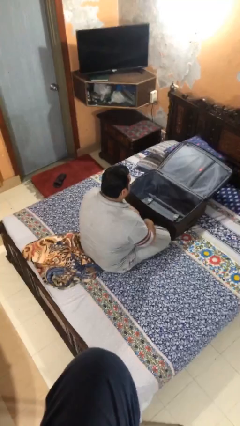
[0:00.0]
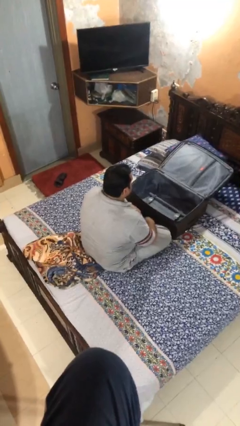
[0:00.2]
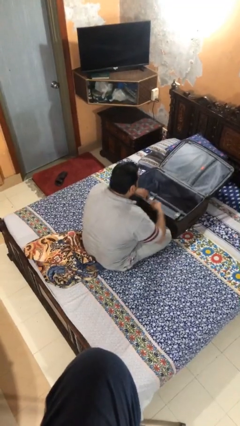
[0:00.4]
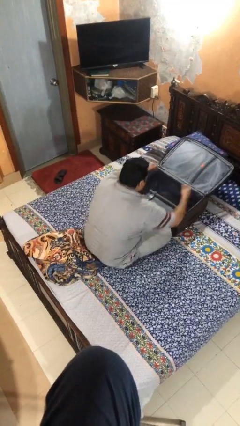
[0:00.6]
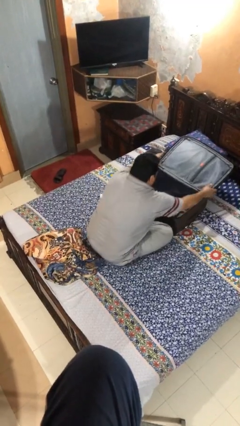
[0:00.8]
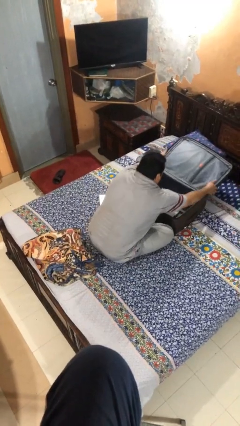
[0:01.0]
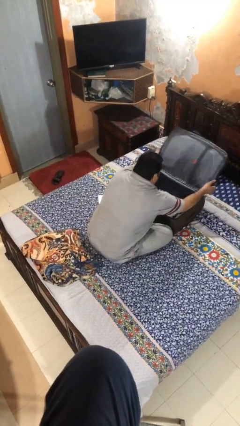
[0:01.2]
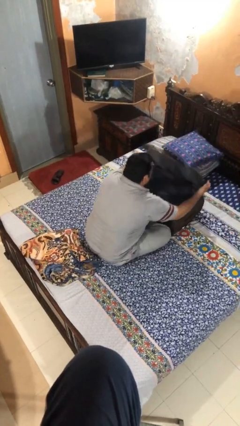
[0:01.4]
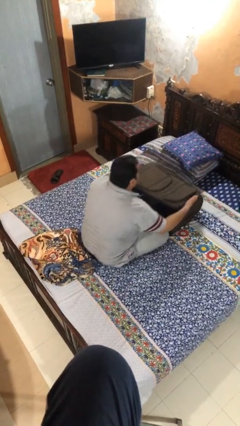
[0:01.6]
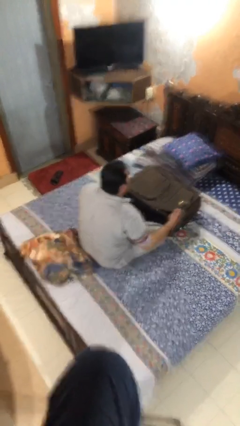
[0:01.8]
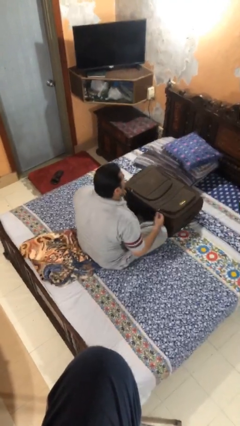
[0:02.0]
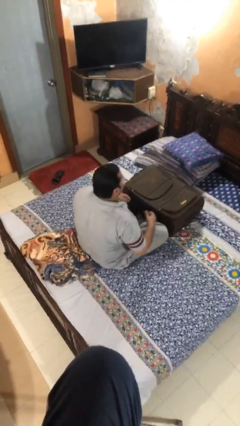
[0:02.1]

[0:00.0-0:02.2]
person closes suitcase

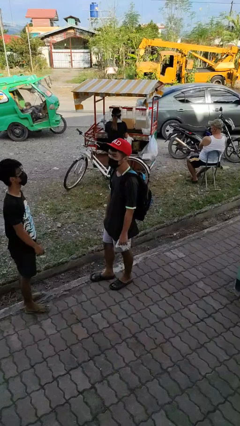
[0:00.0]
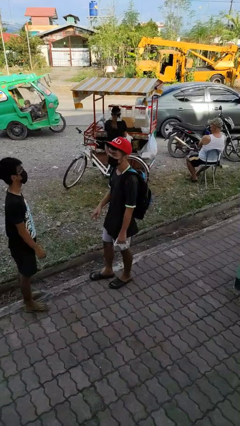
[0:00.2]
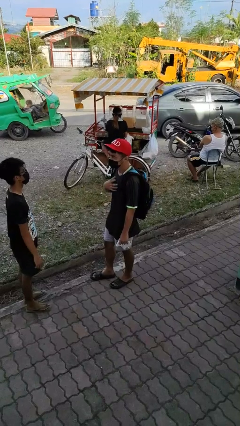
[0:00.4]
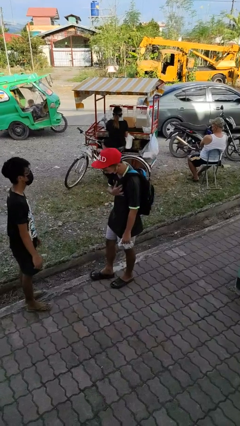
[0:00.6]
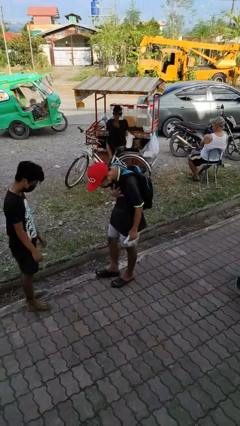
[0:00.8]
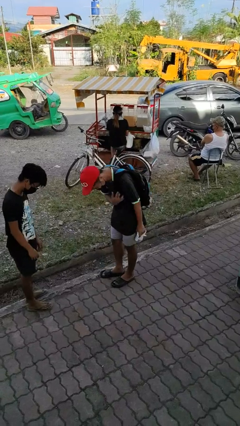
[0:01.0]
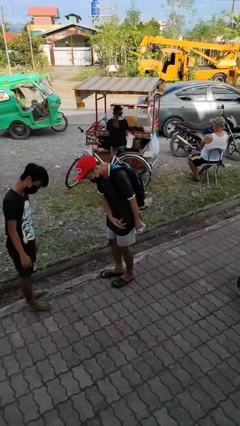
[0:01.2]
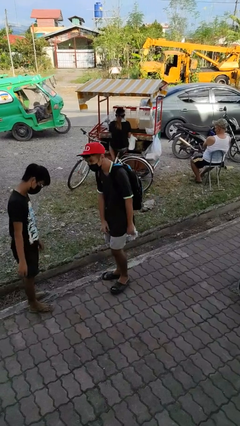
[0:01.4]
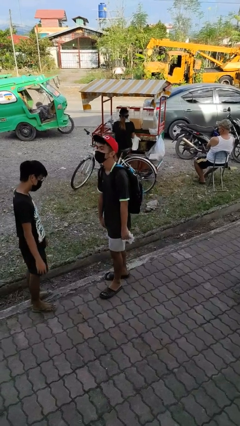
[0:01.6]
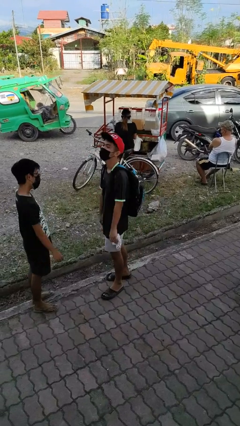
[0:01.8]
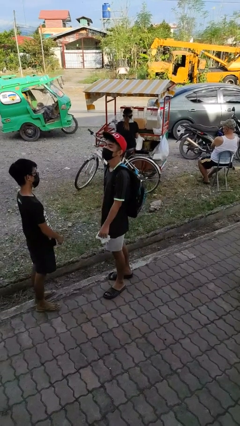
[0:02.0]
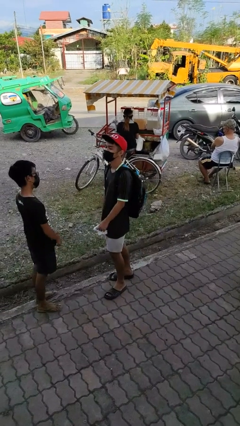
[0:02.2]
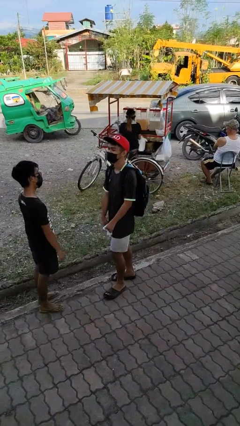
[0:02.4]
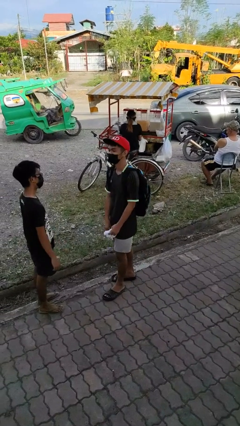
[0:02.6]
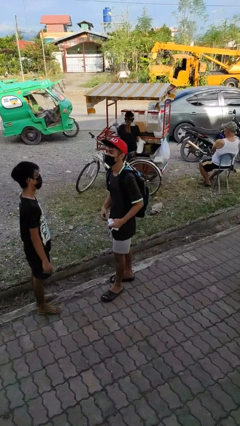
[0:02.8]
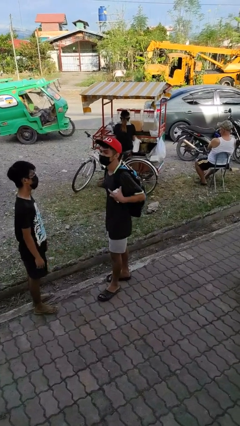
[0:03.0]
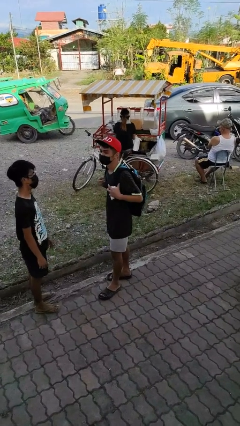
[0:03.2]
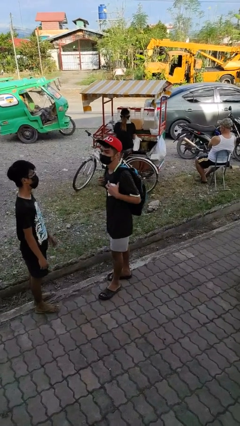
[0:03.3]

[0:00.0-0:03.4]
person laughs with person

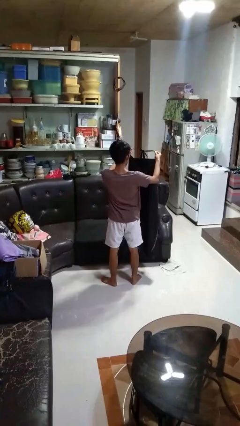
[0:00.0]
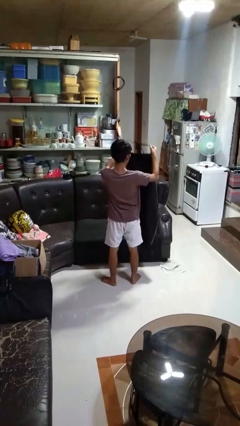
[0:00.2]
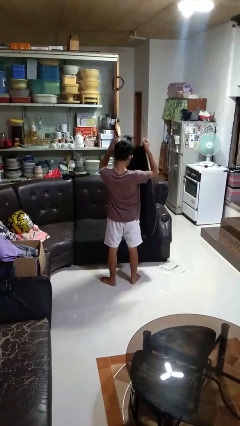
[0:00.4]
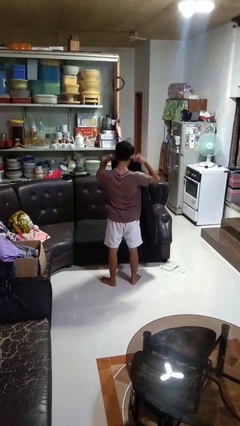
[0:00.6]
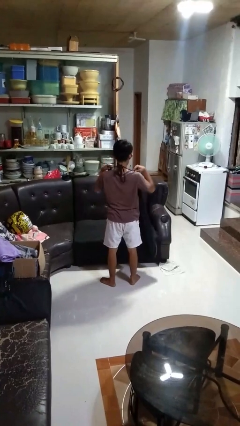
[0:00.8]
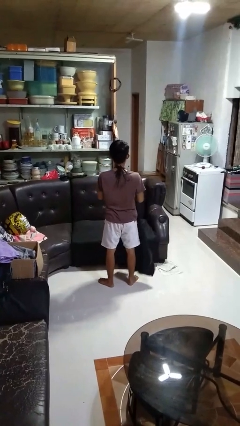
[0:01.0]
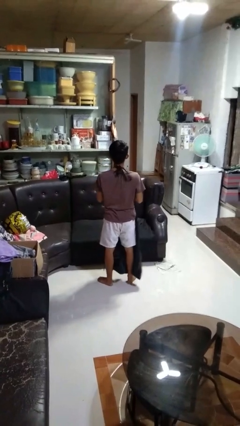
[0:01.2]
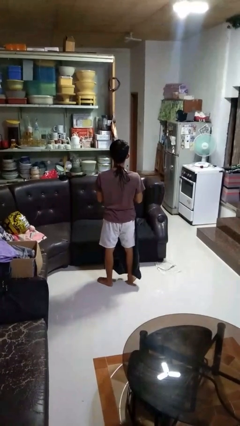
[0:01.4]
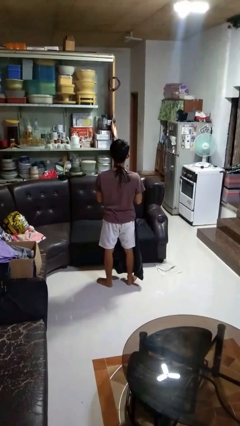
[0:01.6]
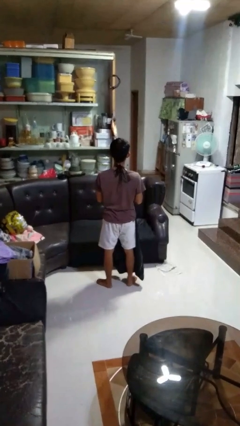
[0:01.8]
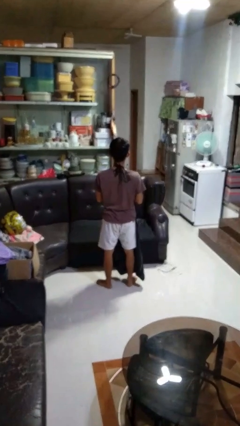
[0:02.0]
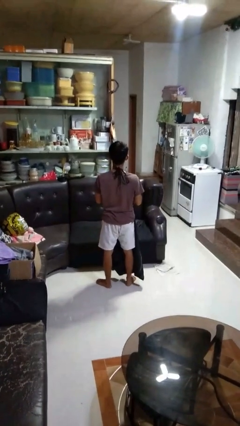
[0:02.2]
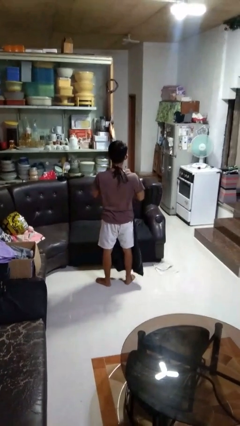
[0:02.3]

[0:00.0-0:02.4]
person puts on apron

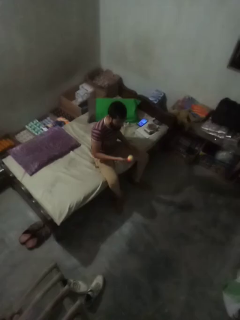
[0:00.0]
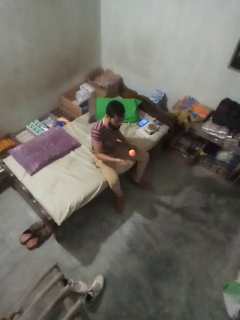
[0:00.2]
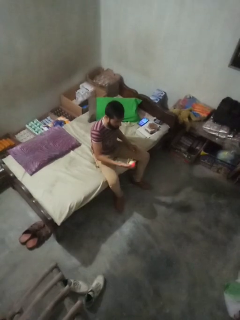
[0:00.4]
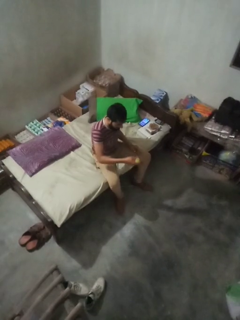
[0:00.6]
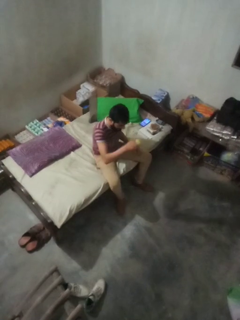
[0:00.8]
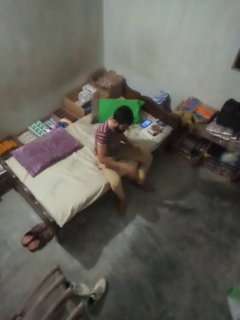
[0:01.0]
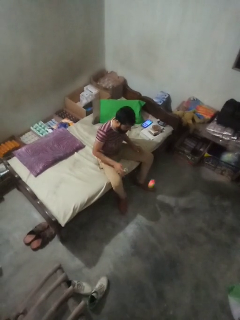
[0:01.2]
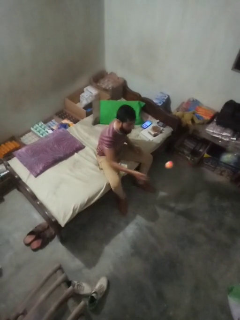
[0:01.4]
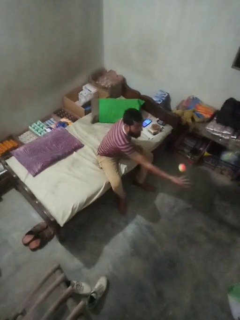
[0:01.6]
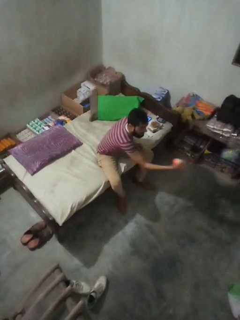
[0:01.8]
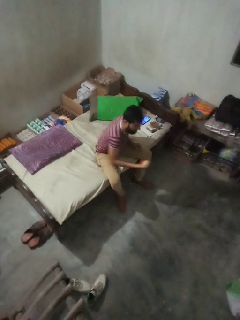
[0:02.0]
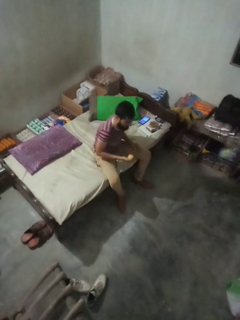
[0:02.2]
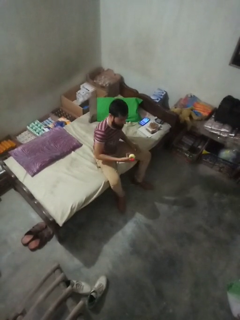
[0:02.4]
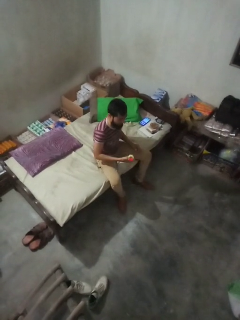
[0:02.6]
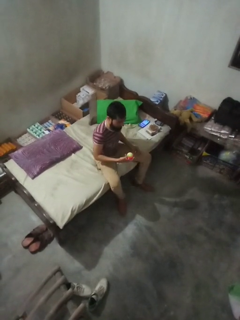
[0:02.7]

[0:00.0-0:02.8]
person bounces ball on floor

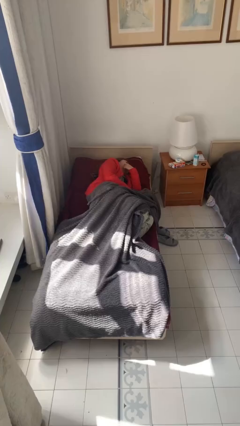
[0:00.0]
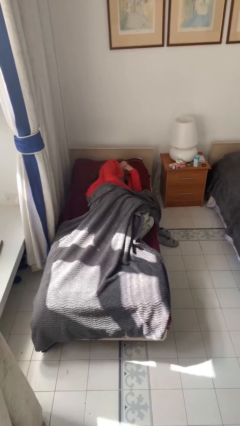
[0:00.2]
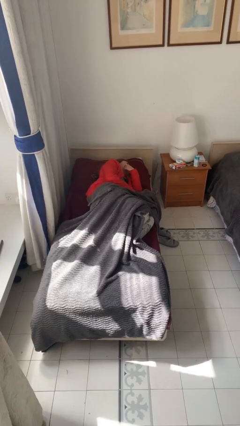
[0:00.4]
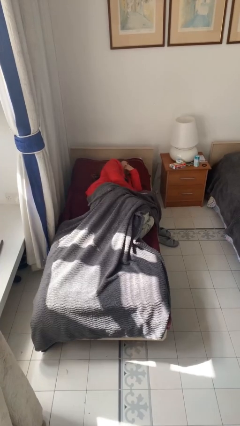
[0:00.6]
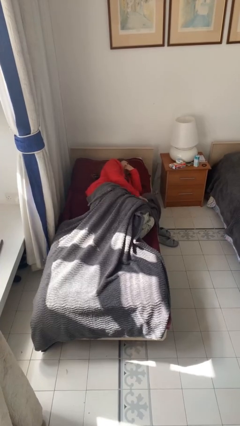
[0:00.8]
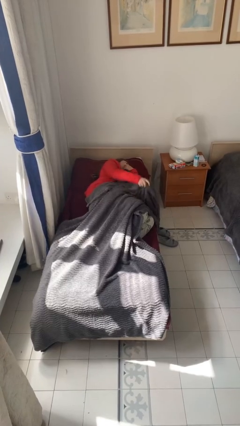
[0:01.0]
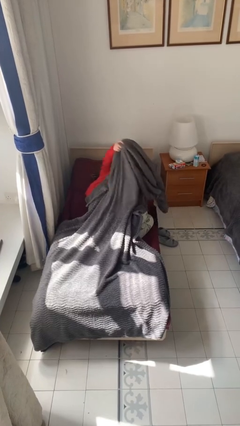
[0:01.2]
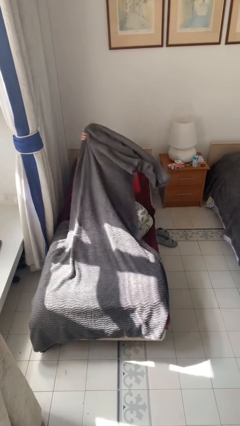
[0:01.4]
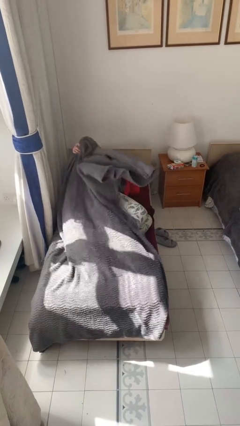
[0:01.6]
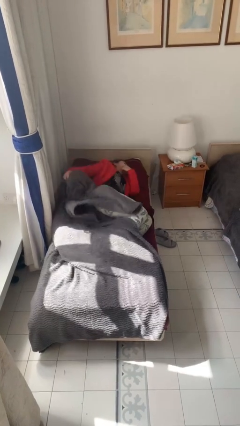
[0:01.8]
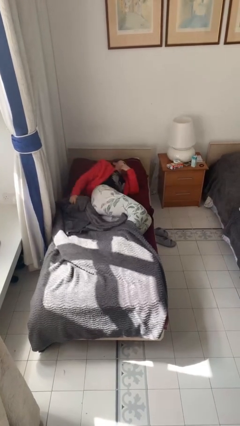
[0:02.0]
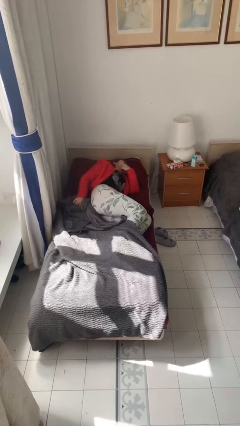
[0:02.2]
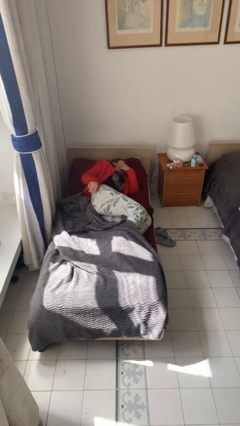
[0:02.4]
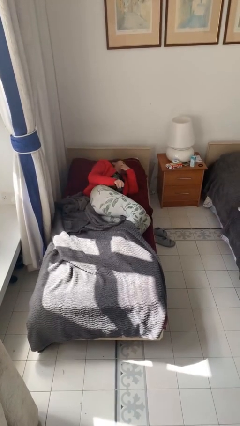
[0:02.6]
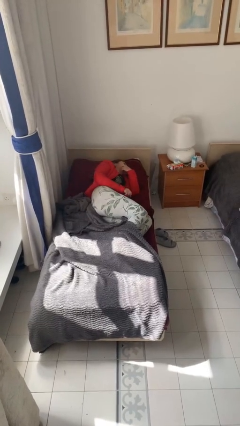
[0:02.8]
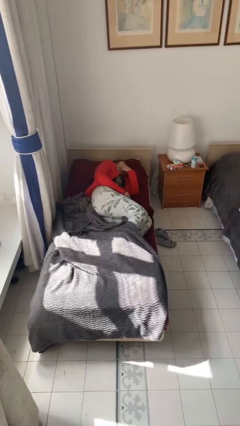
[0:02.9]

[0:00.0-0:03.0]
person uncovers with bedsheets

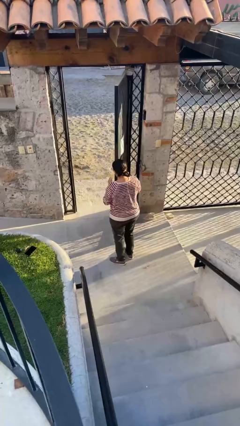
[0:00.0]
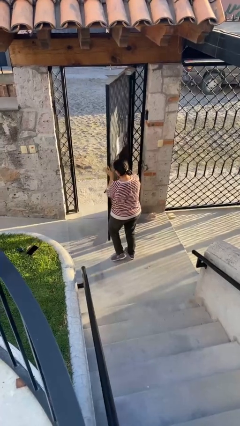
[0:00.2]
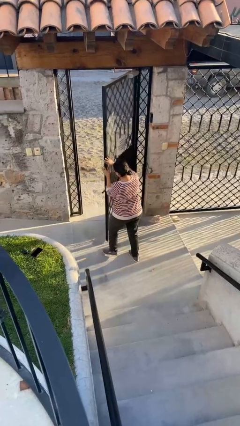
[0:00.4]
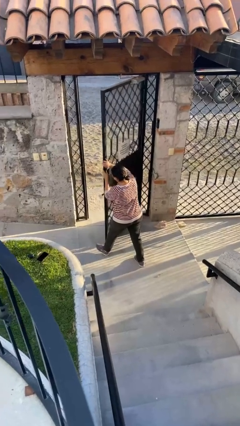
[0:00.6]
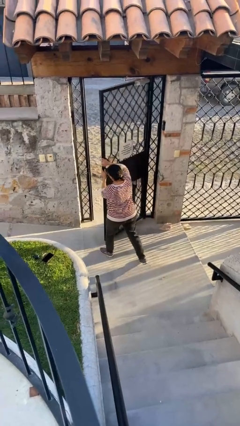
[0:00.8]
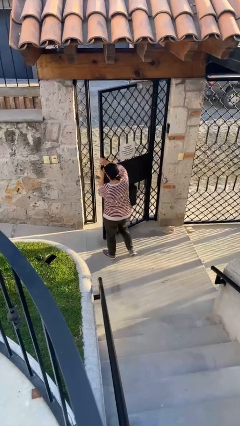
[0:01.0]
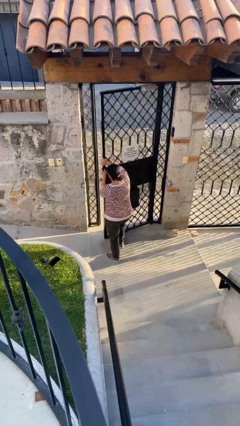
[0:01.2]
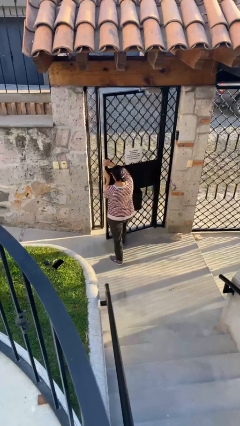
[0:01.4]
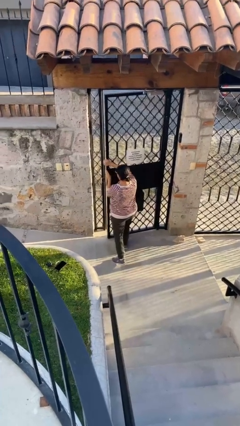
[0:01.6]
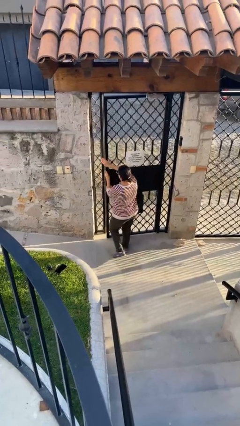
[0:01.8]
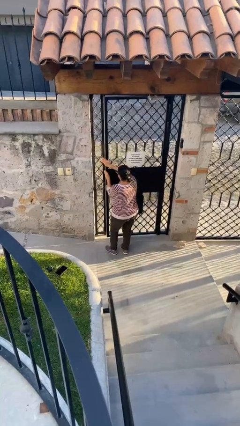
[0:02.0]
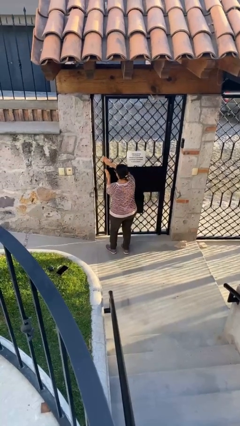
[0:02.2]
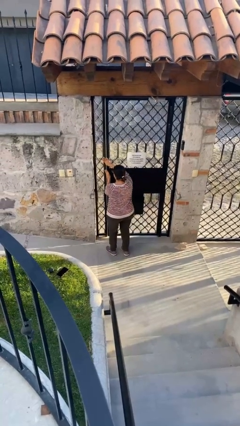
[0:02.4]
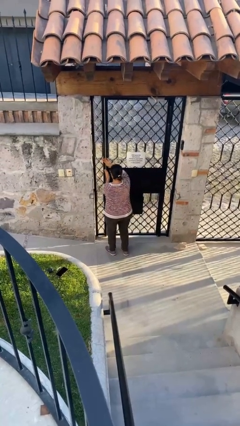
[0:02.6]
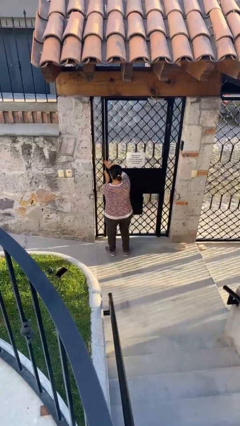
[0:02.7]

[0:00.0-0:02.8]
person closes facility door

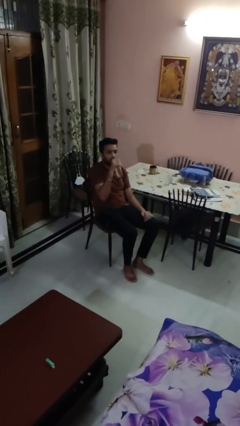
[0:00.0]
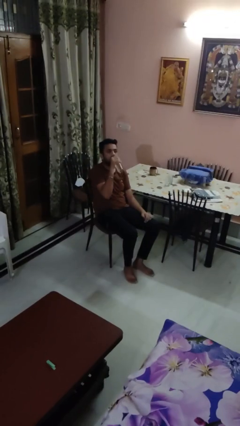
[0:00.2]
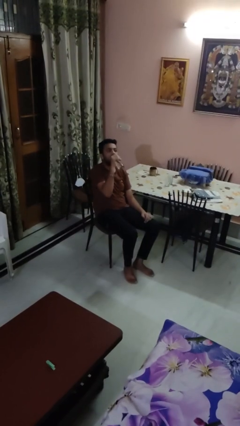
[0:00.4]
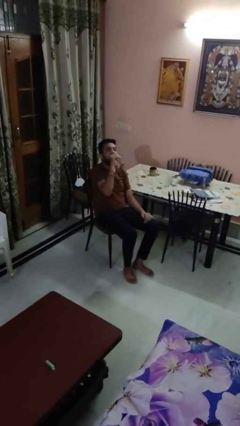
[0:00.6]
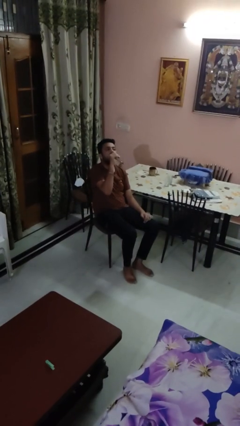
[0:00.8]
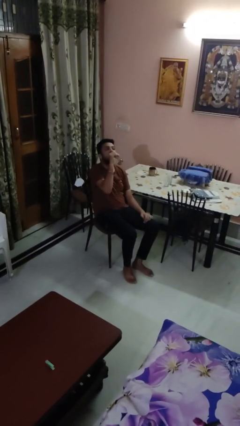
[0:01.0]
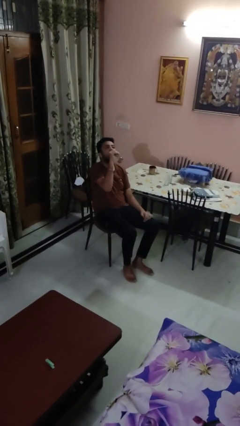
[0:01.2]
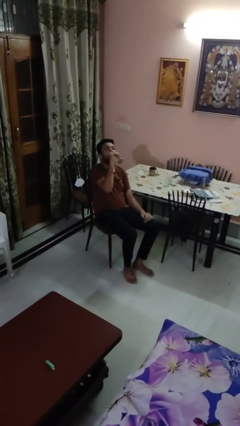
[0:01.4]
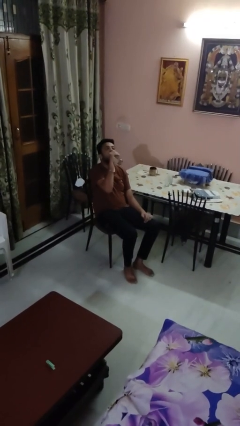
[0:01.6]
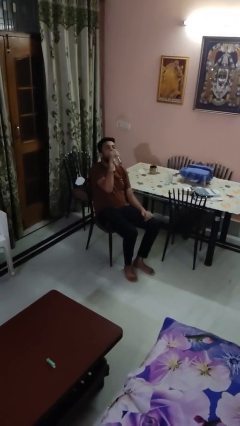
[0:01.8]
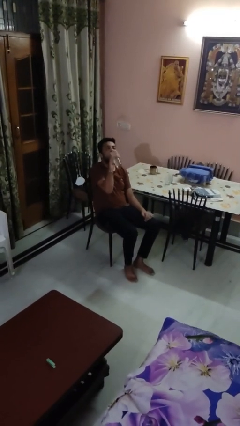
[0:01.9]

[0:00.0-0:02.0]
person drinks from bottle
